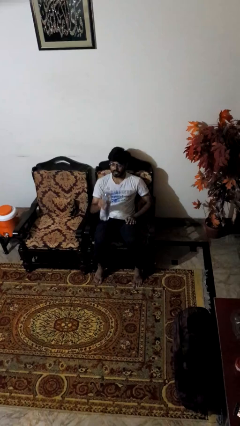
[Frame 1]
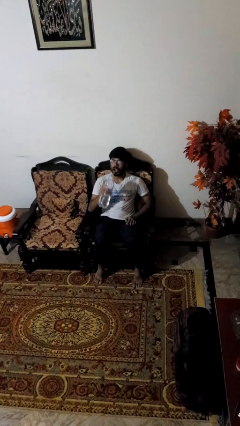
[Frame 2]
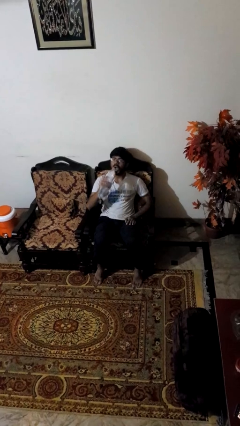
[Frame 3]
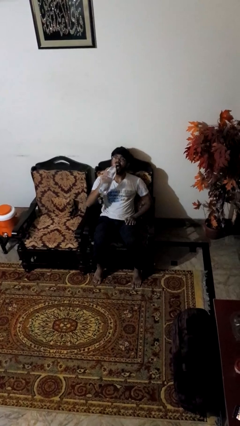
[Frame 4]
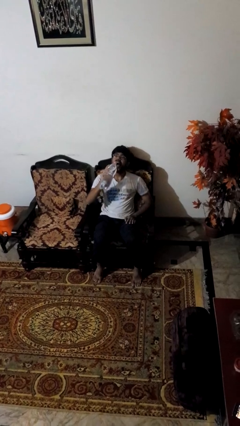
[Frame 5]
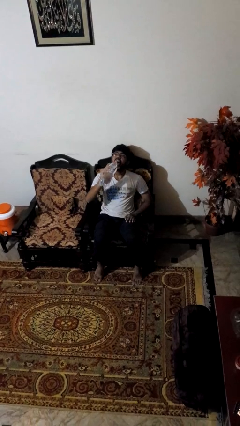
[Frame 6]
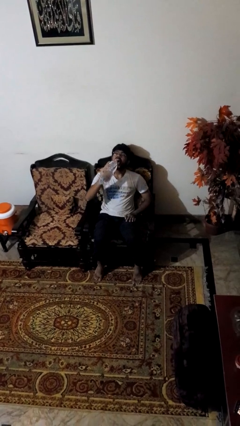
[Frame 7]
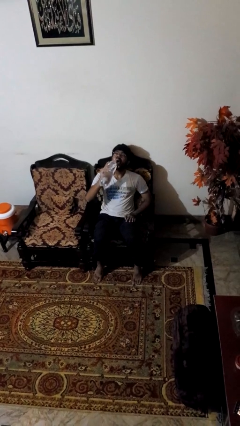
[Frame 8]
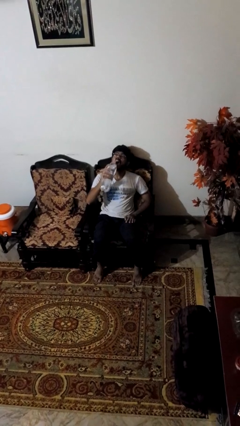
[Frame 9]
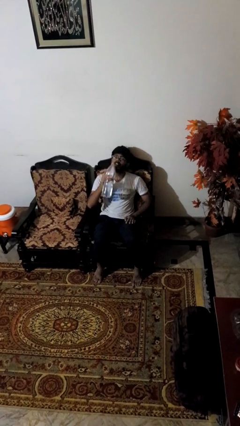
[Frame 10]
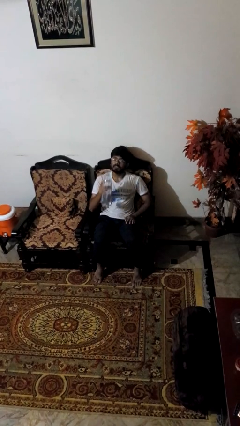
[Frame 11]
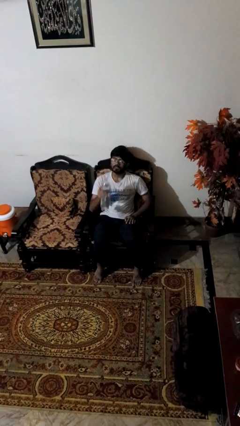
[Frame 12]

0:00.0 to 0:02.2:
person drinks from bottle

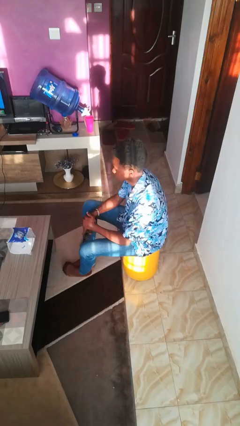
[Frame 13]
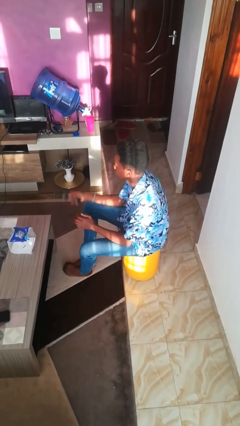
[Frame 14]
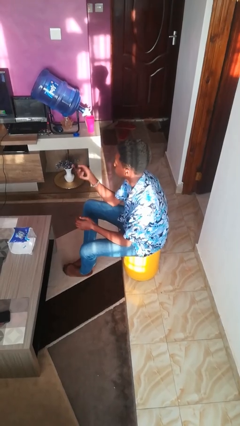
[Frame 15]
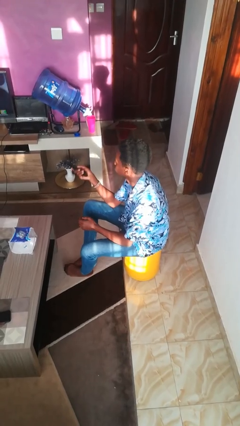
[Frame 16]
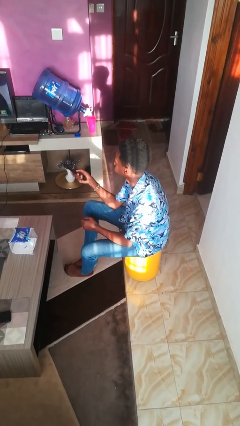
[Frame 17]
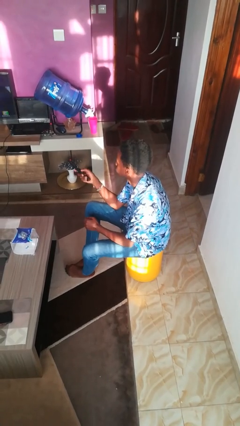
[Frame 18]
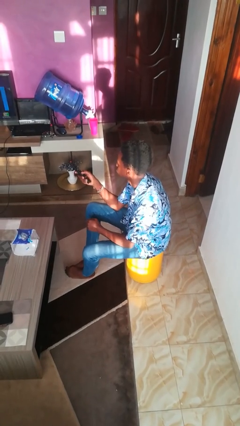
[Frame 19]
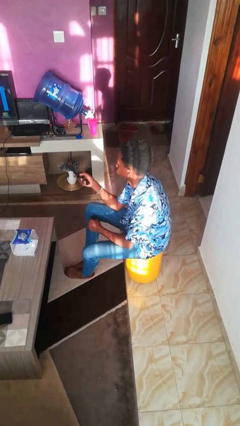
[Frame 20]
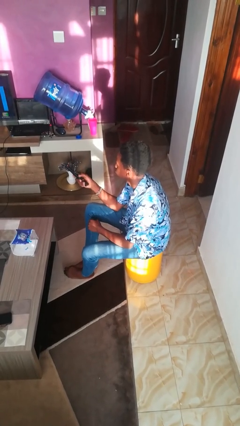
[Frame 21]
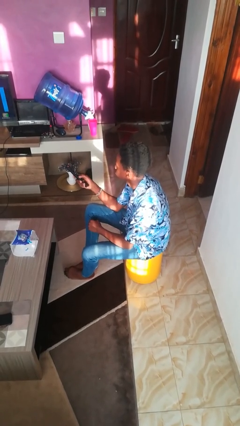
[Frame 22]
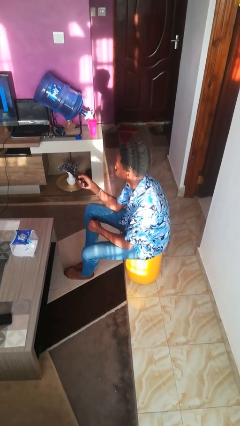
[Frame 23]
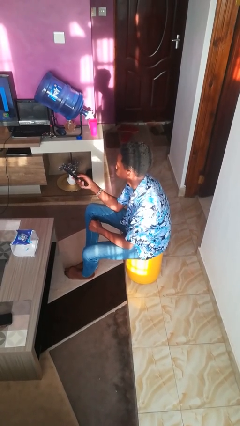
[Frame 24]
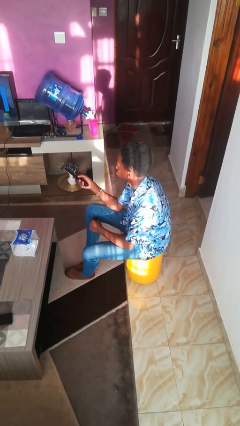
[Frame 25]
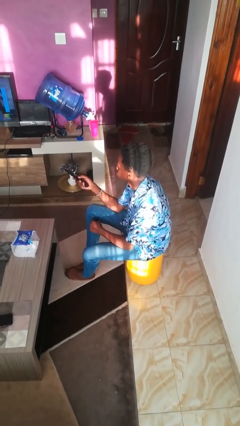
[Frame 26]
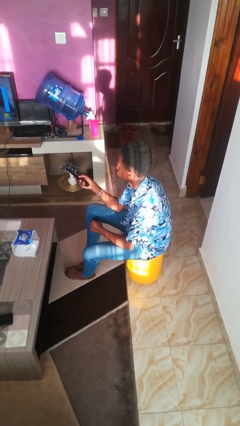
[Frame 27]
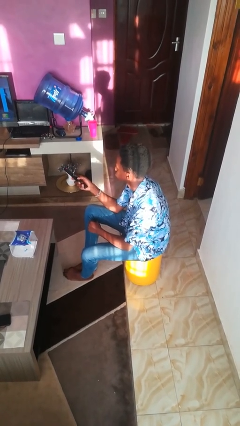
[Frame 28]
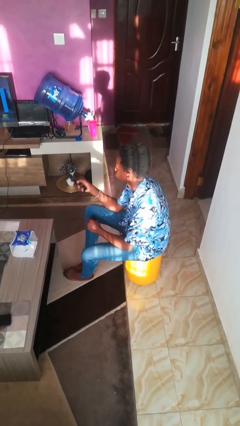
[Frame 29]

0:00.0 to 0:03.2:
person uses television remote

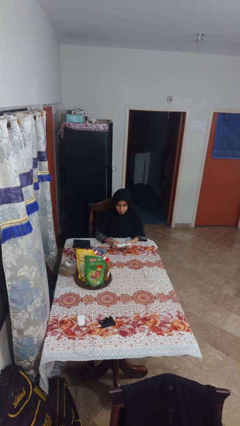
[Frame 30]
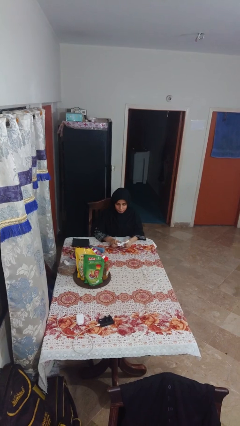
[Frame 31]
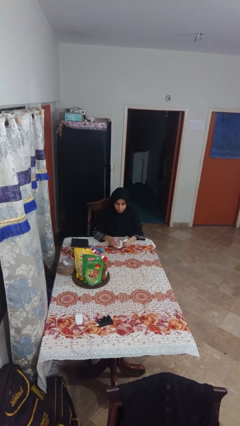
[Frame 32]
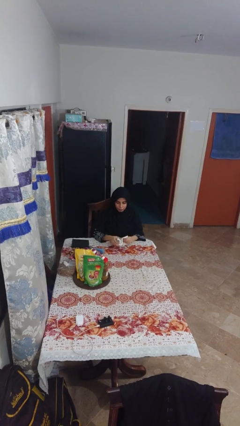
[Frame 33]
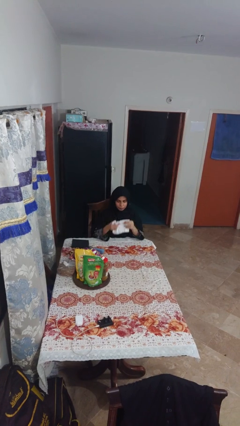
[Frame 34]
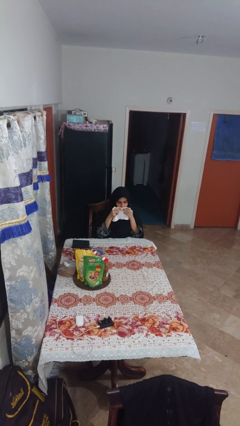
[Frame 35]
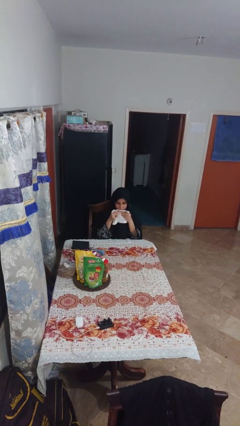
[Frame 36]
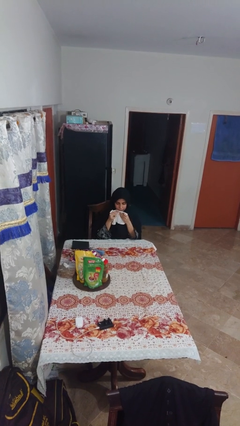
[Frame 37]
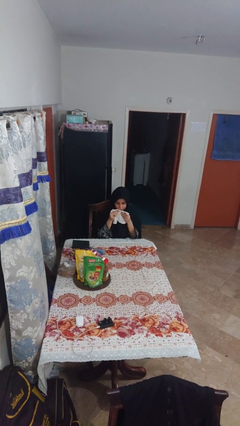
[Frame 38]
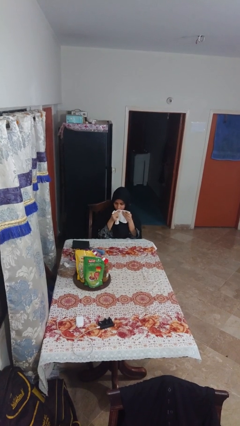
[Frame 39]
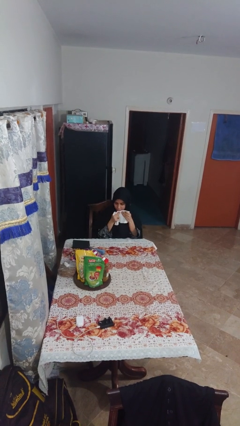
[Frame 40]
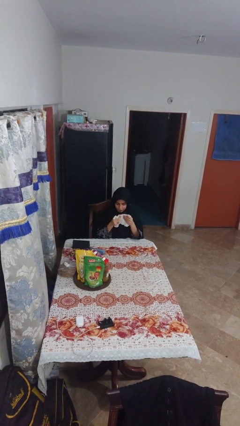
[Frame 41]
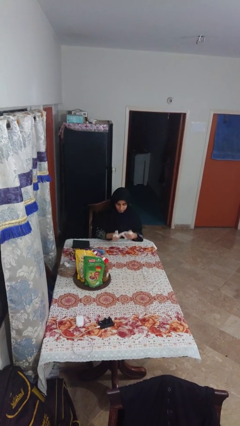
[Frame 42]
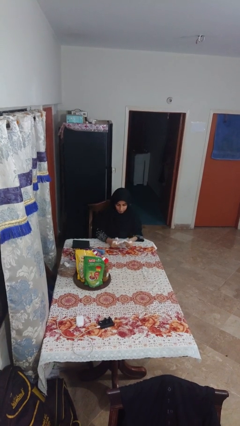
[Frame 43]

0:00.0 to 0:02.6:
person wipes mouth with napkin

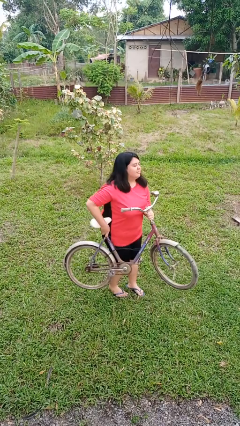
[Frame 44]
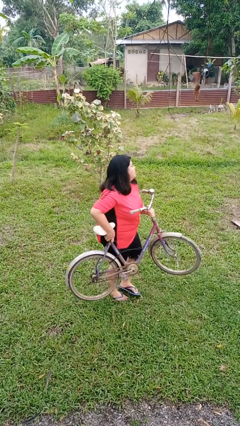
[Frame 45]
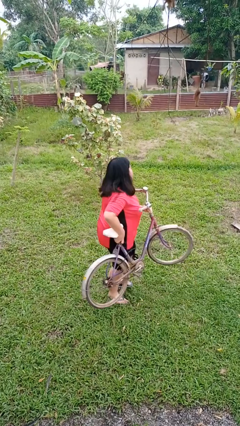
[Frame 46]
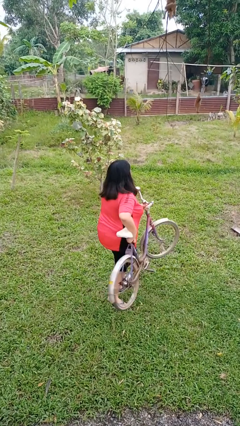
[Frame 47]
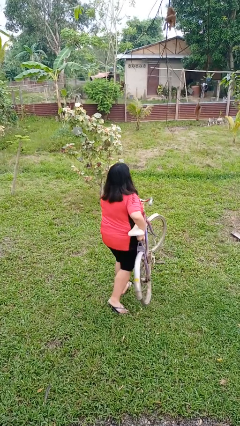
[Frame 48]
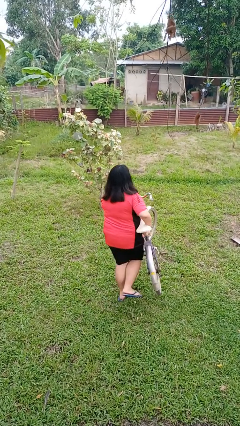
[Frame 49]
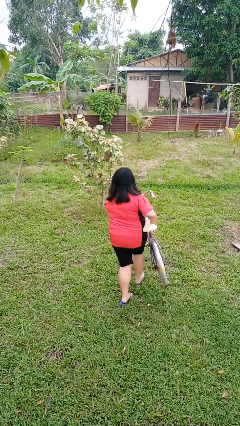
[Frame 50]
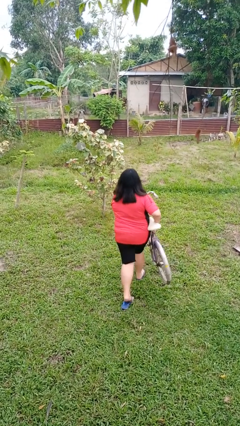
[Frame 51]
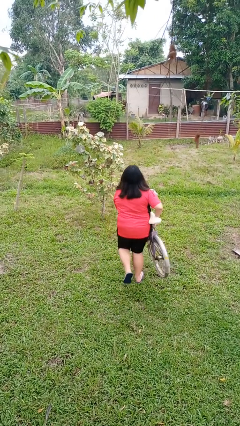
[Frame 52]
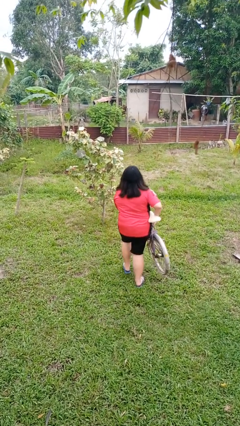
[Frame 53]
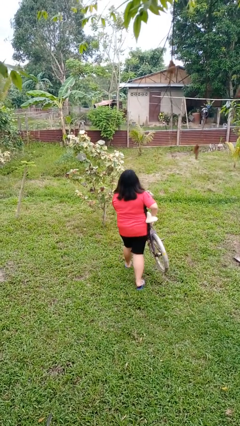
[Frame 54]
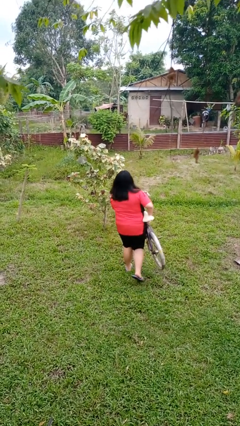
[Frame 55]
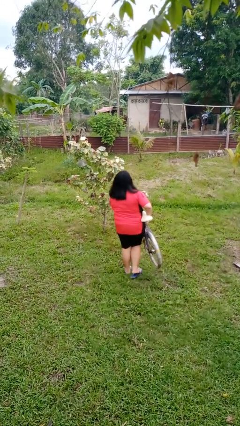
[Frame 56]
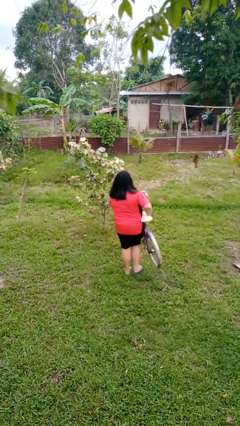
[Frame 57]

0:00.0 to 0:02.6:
person carries bicycle

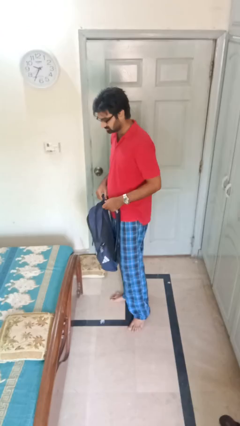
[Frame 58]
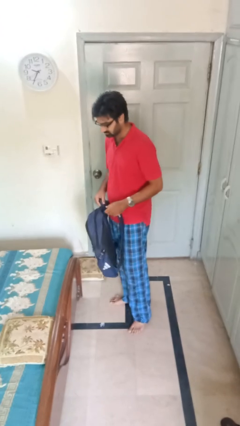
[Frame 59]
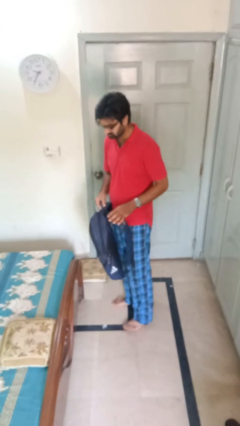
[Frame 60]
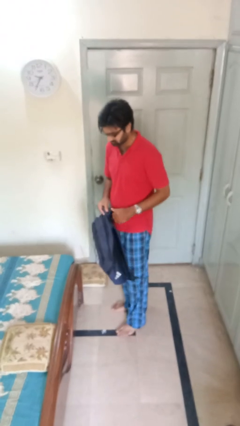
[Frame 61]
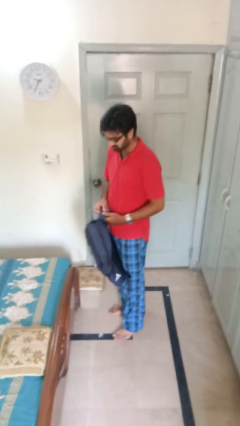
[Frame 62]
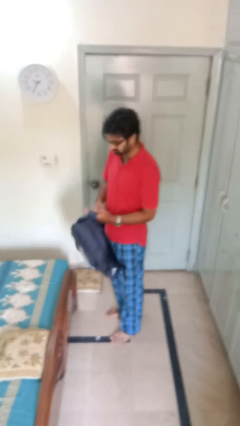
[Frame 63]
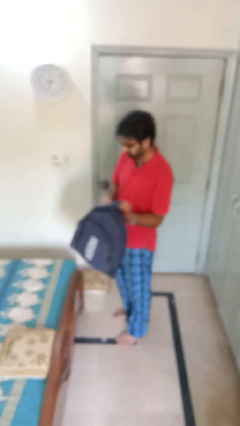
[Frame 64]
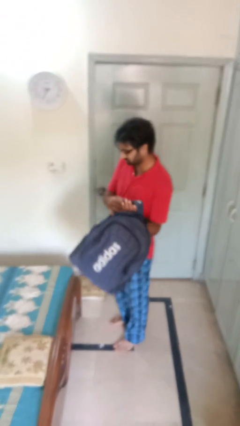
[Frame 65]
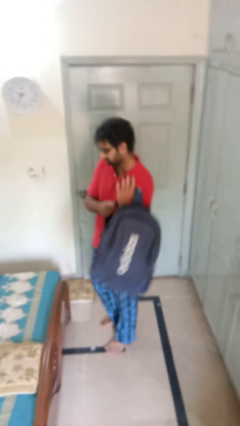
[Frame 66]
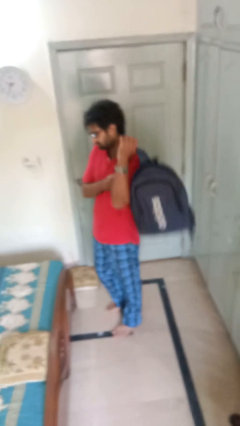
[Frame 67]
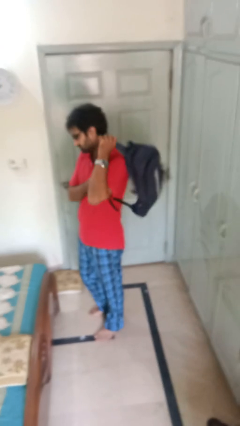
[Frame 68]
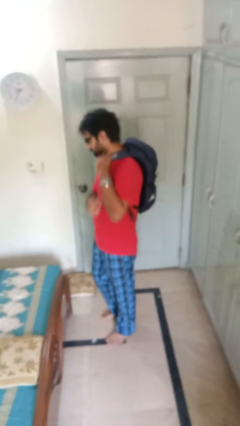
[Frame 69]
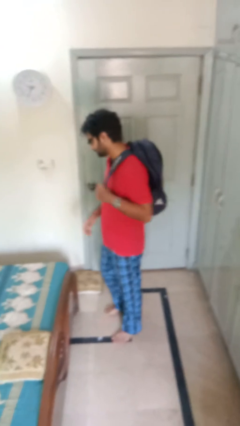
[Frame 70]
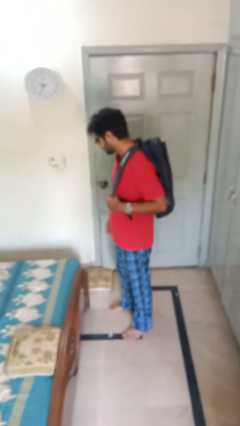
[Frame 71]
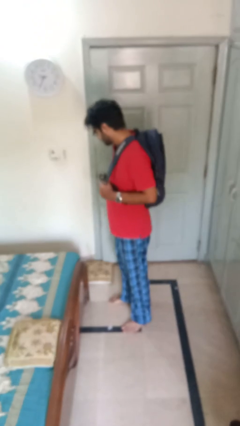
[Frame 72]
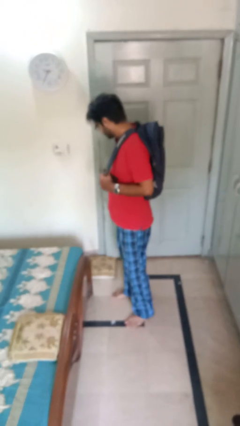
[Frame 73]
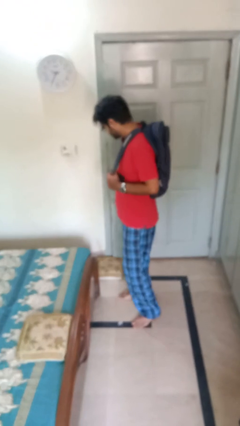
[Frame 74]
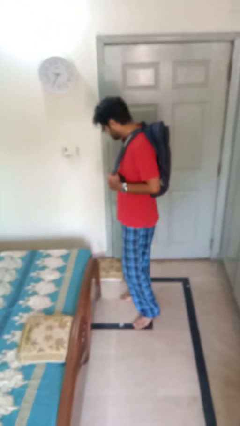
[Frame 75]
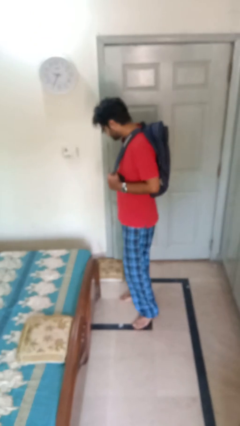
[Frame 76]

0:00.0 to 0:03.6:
person puts on backpack

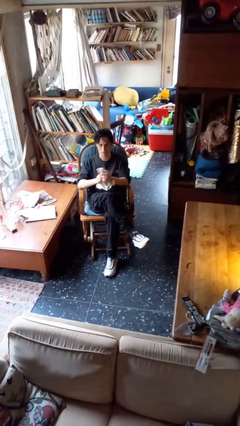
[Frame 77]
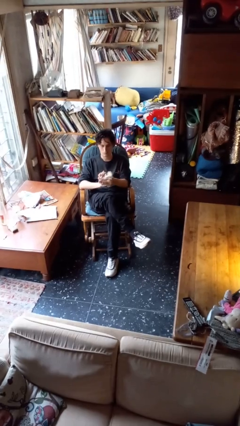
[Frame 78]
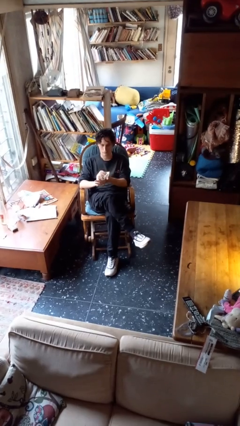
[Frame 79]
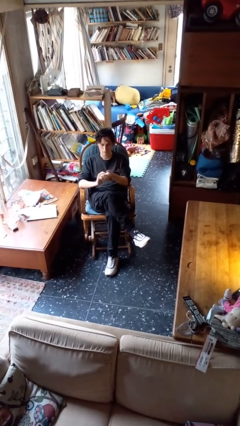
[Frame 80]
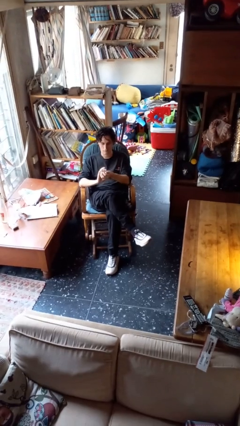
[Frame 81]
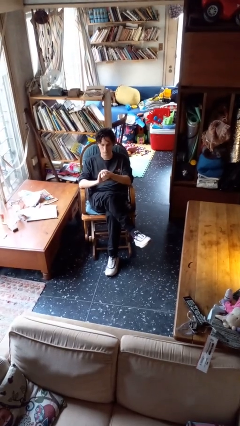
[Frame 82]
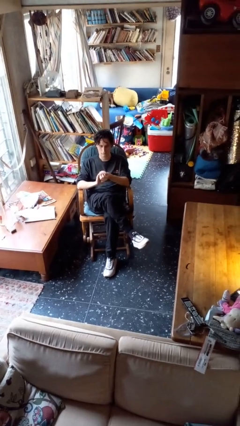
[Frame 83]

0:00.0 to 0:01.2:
person crumples paper

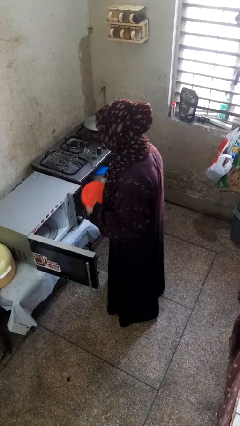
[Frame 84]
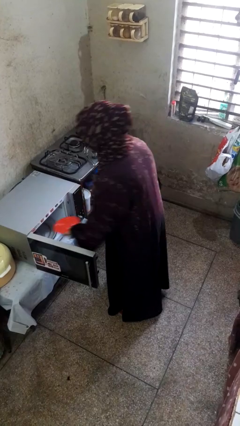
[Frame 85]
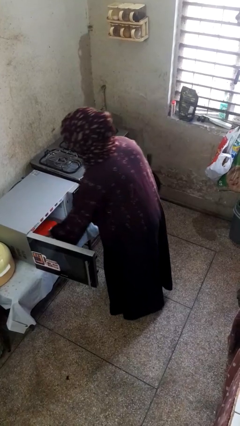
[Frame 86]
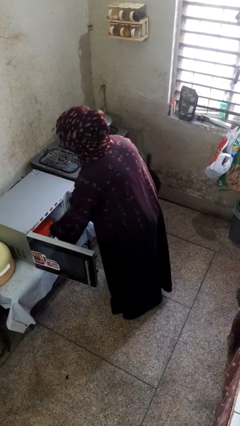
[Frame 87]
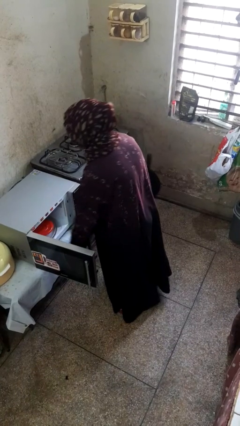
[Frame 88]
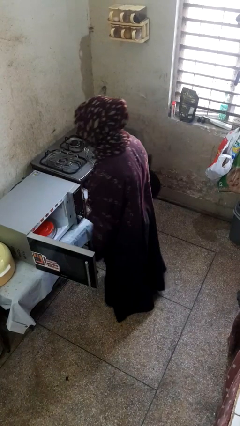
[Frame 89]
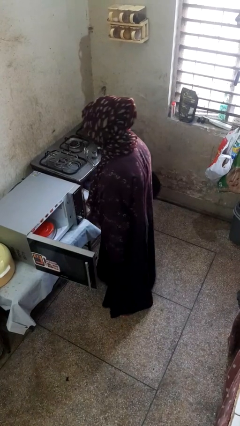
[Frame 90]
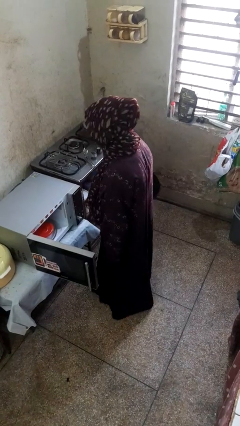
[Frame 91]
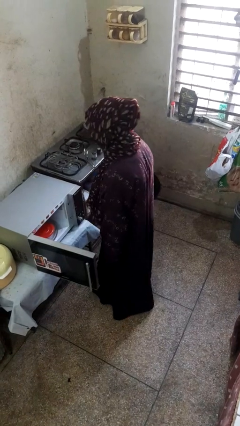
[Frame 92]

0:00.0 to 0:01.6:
person puts object into microwave

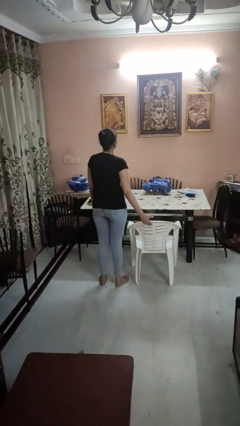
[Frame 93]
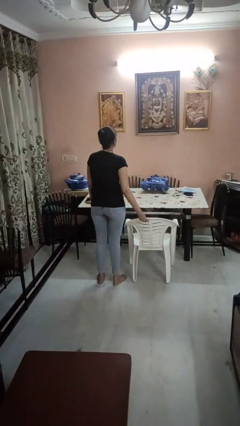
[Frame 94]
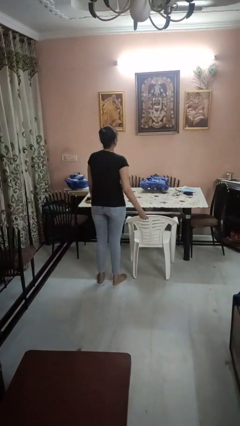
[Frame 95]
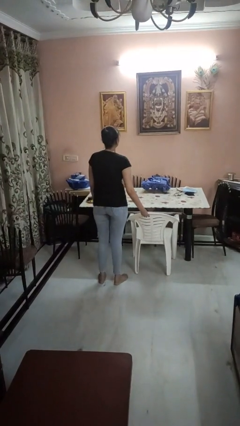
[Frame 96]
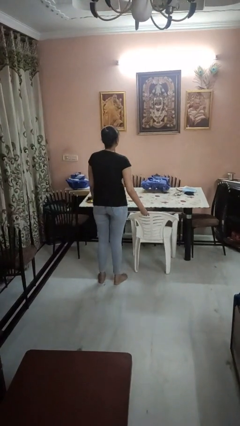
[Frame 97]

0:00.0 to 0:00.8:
person pushes in chair
